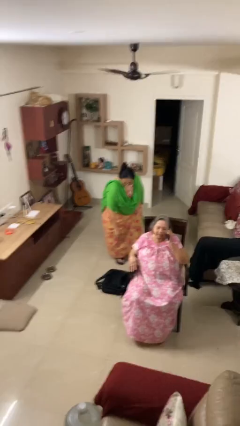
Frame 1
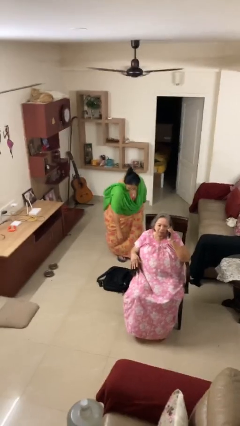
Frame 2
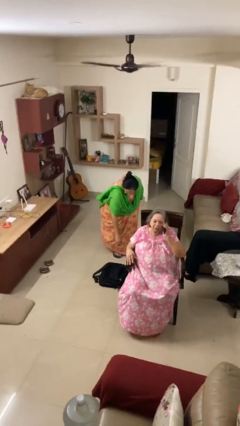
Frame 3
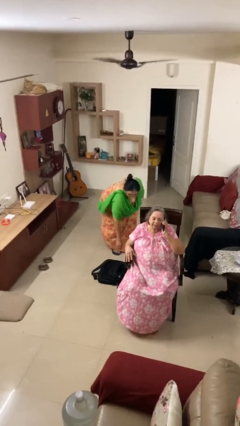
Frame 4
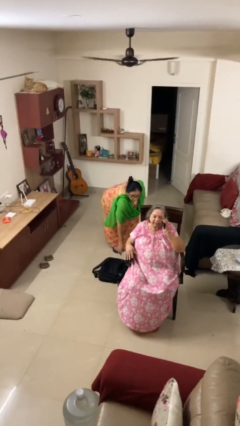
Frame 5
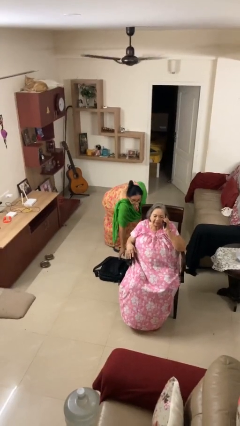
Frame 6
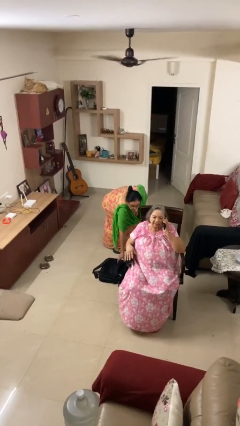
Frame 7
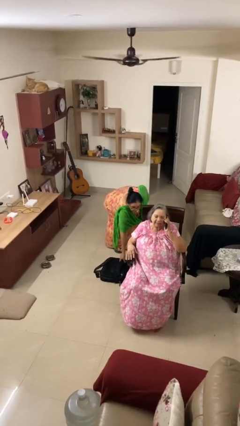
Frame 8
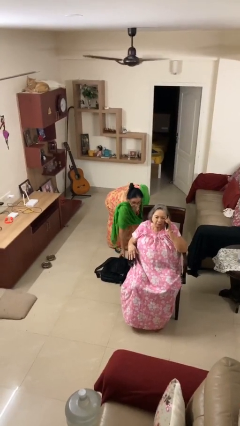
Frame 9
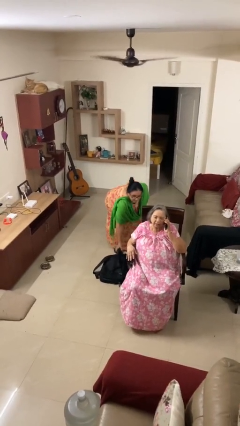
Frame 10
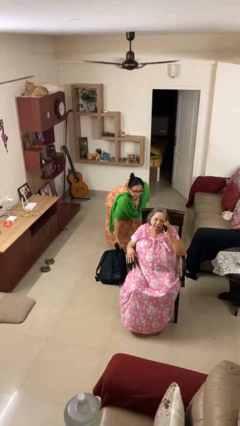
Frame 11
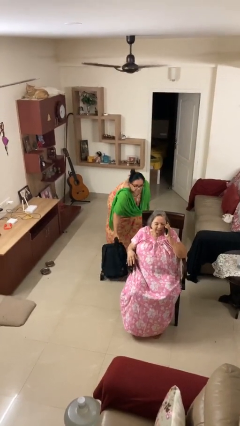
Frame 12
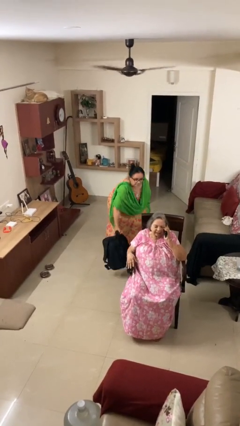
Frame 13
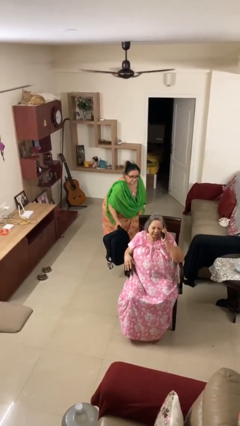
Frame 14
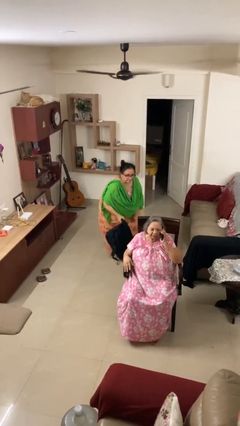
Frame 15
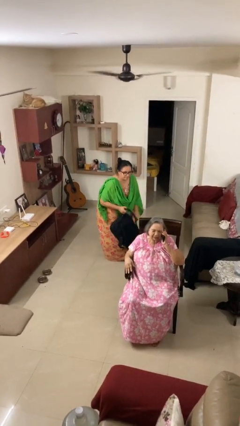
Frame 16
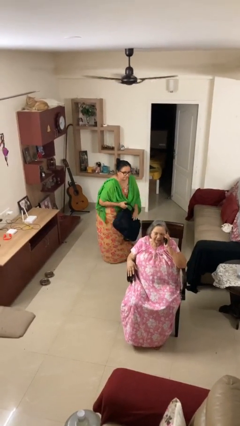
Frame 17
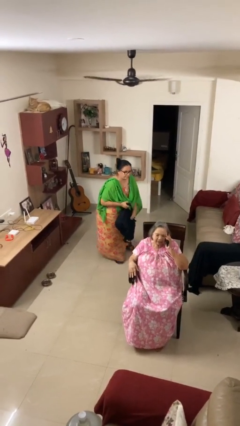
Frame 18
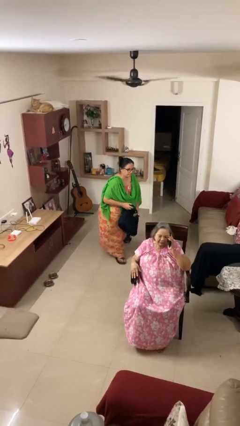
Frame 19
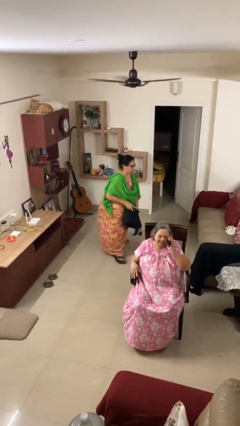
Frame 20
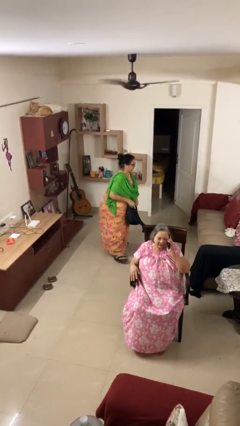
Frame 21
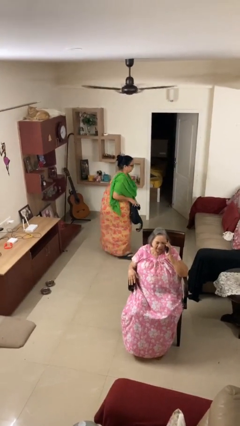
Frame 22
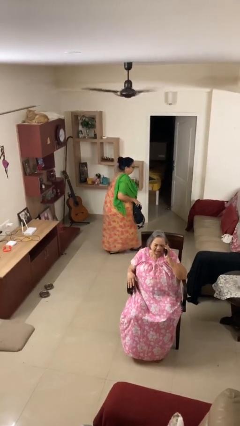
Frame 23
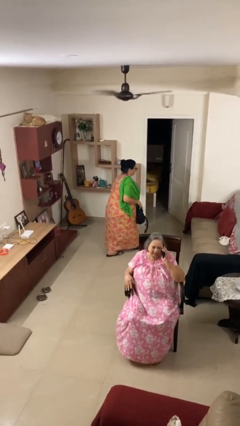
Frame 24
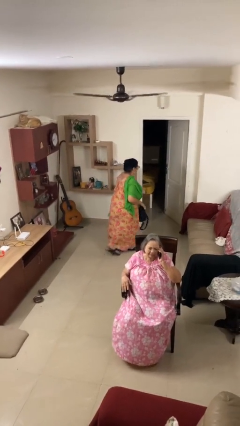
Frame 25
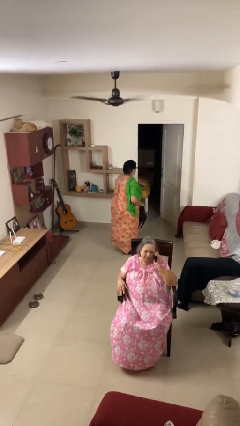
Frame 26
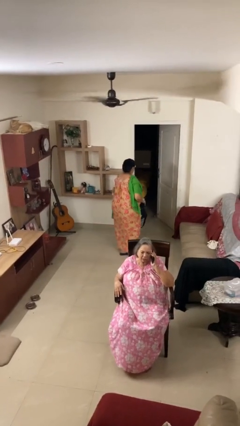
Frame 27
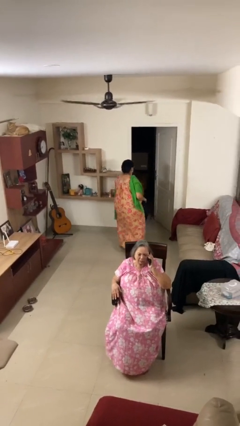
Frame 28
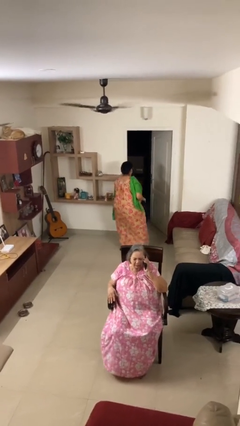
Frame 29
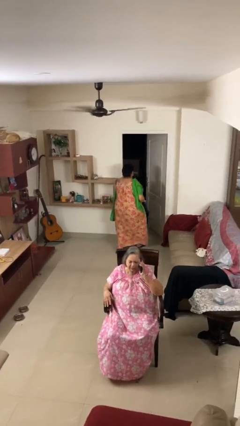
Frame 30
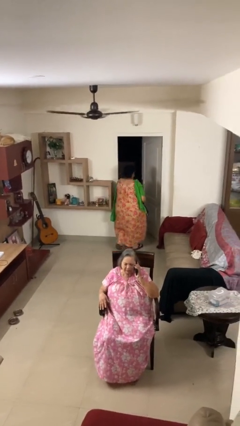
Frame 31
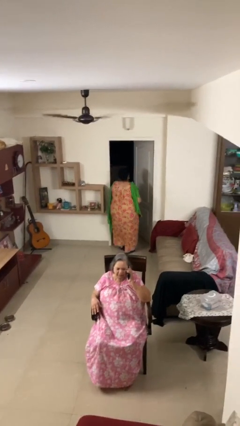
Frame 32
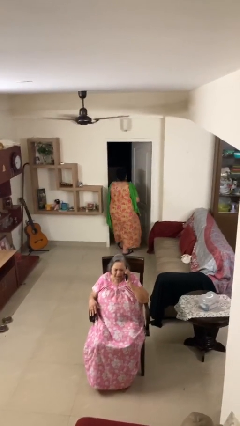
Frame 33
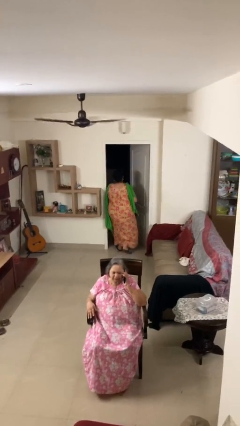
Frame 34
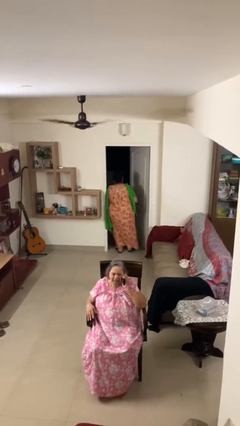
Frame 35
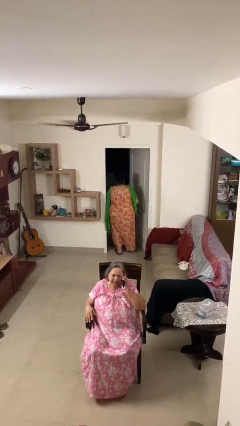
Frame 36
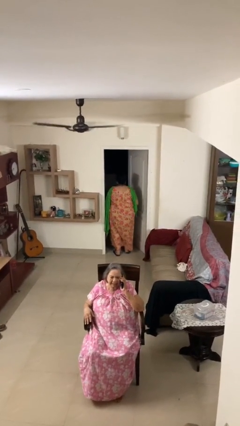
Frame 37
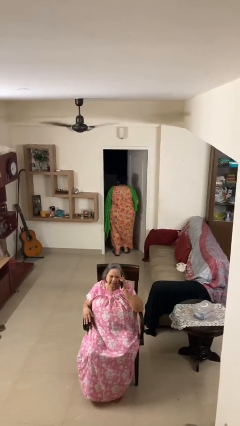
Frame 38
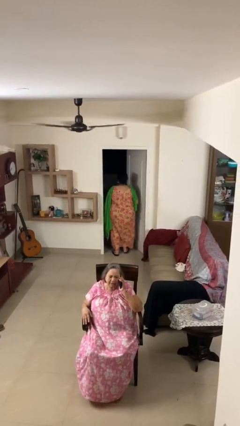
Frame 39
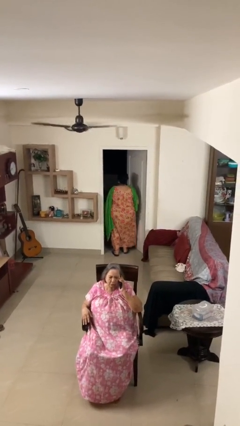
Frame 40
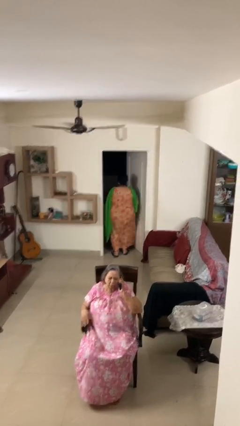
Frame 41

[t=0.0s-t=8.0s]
person steals object from person

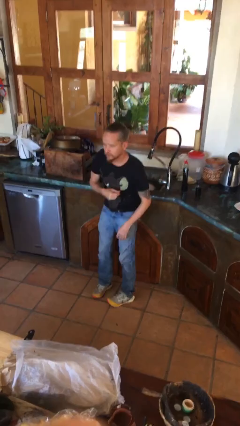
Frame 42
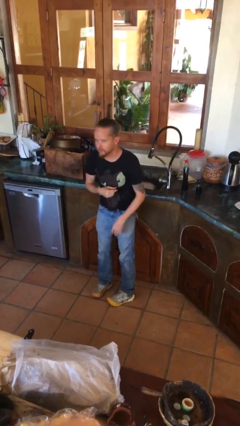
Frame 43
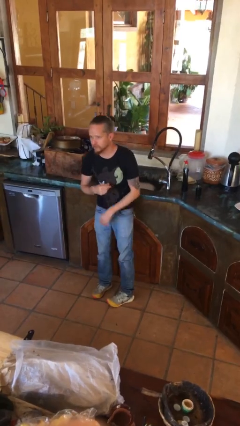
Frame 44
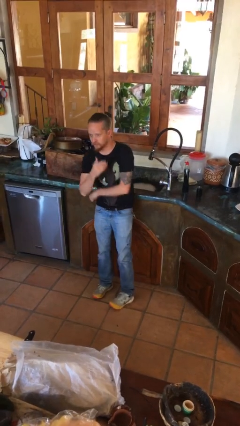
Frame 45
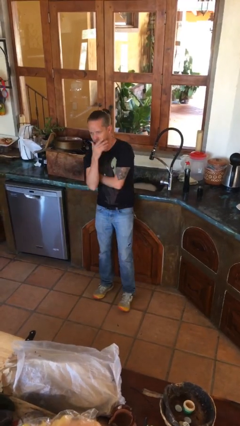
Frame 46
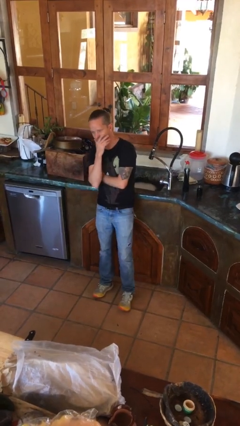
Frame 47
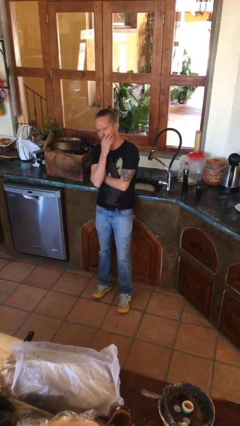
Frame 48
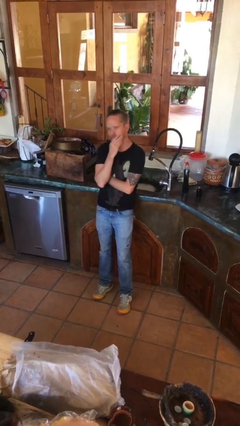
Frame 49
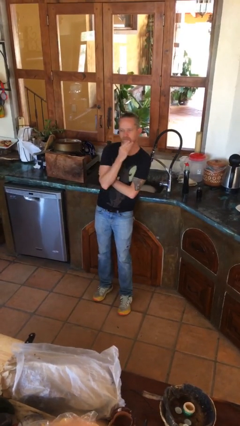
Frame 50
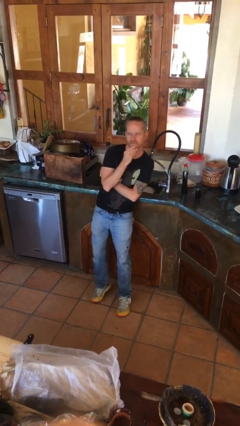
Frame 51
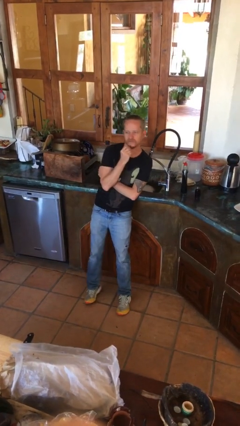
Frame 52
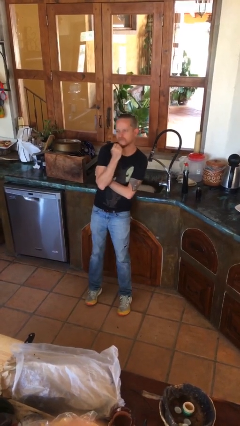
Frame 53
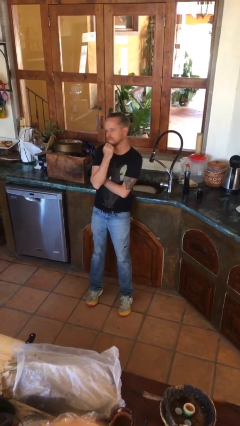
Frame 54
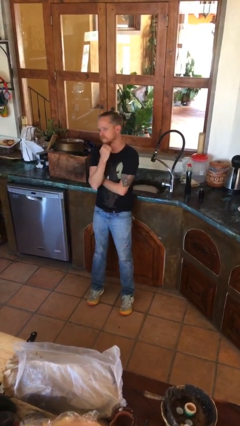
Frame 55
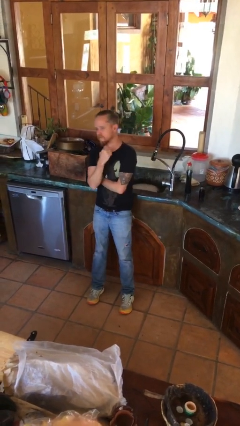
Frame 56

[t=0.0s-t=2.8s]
person strokes chin

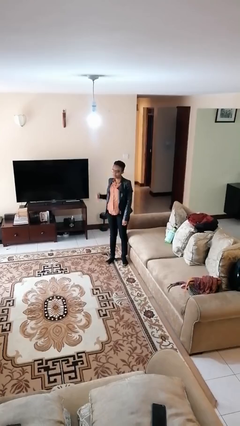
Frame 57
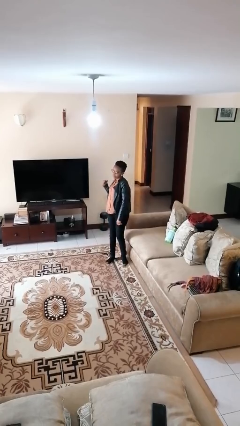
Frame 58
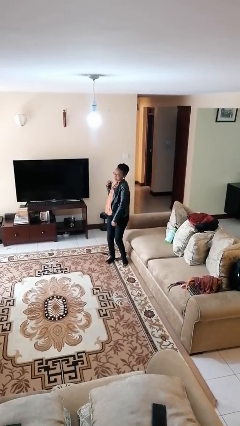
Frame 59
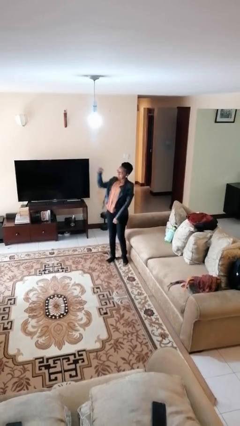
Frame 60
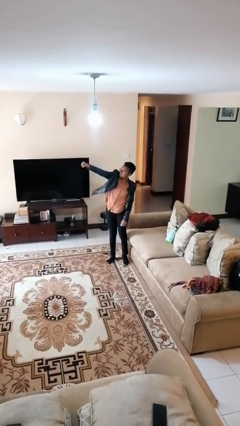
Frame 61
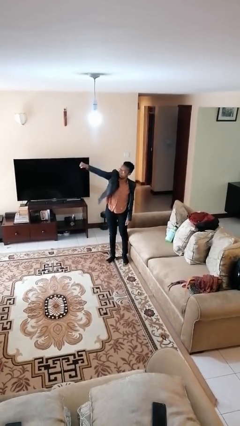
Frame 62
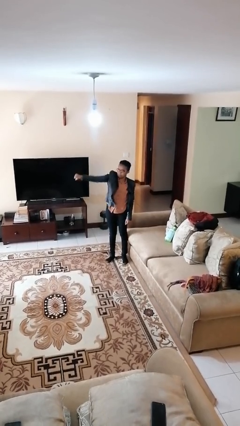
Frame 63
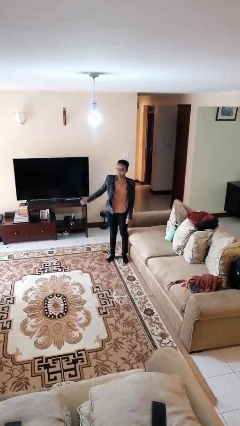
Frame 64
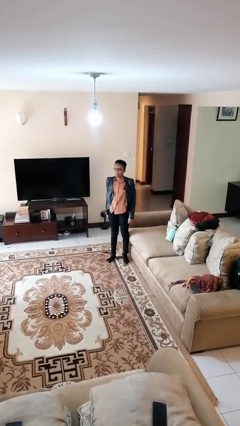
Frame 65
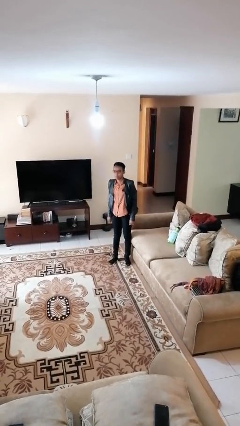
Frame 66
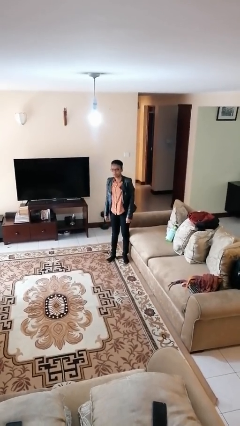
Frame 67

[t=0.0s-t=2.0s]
person punches

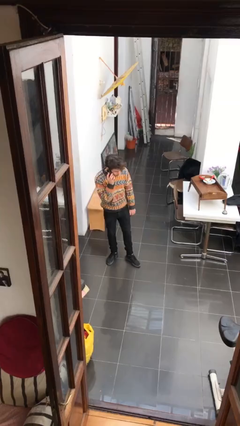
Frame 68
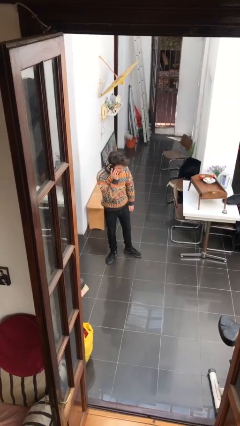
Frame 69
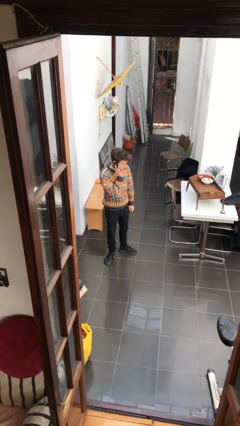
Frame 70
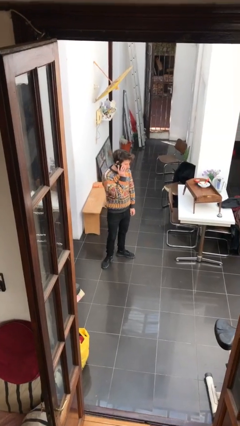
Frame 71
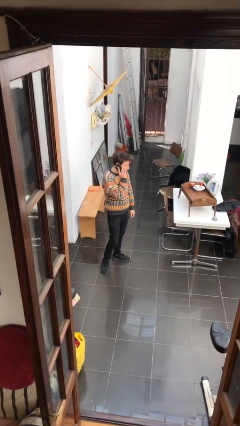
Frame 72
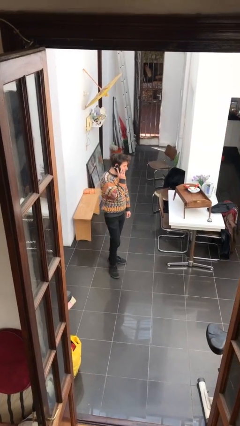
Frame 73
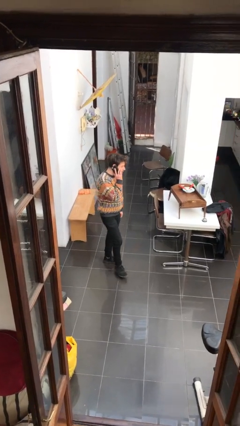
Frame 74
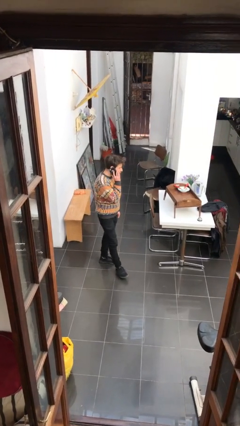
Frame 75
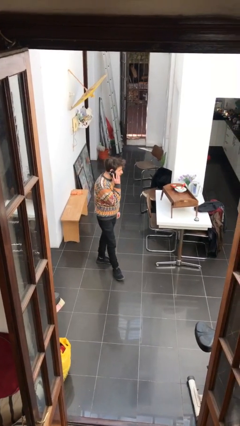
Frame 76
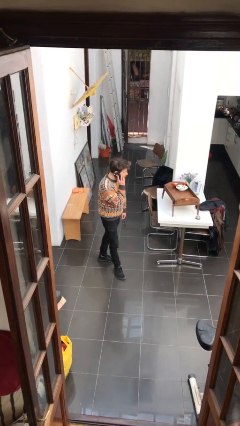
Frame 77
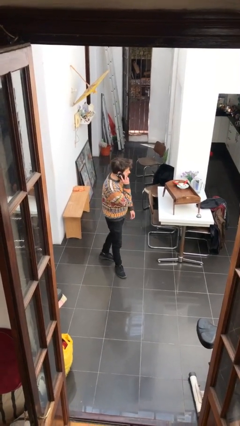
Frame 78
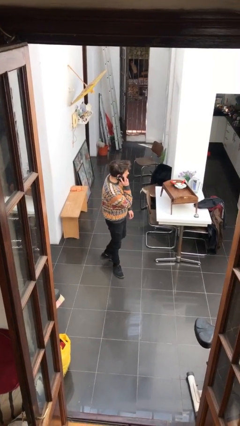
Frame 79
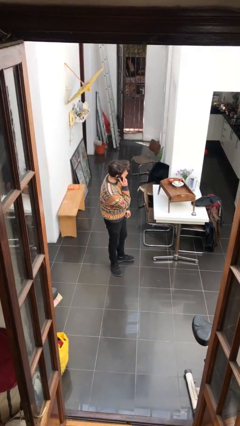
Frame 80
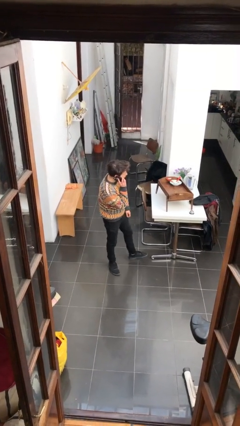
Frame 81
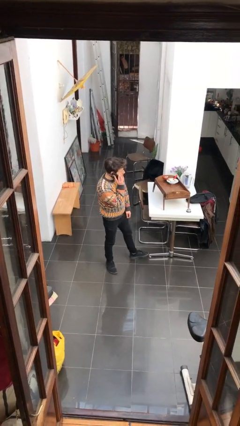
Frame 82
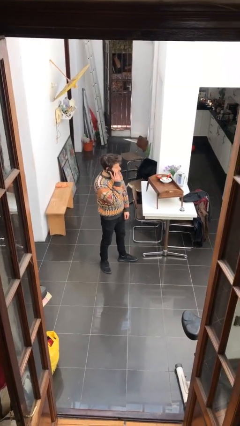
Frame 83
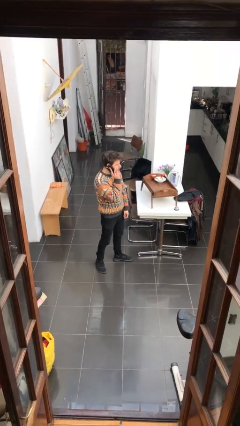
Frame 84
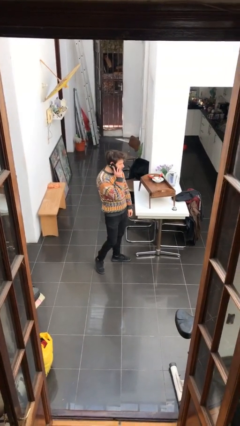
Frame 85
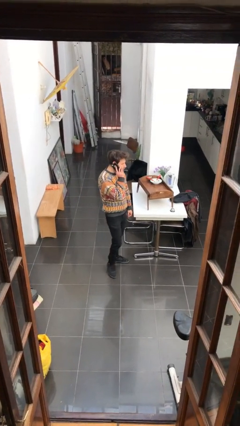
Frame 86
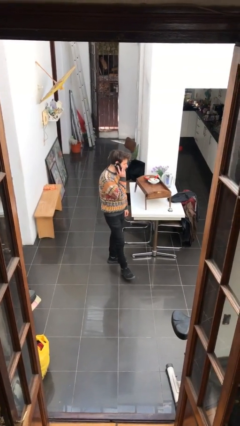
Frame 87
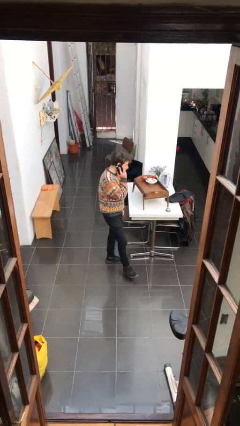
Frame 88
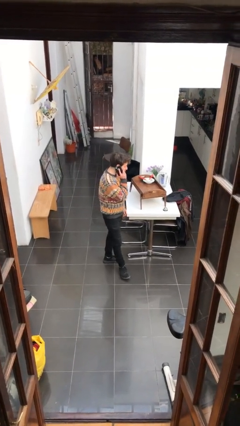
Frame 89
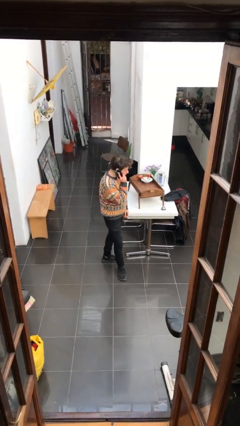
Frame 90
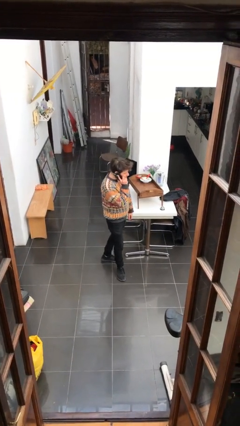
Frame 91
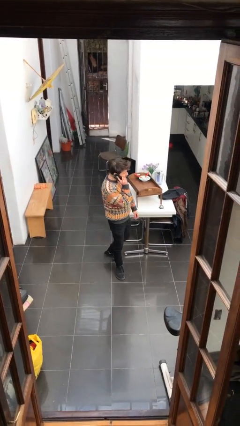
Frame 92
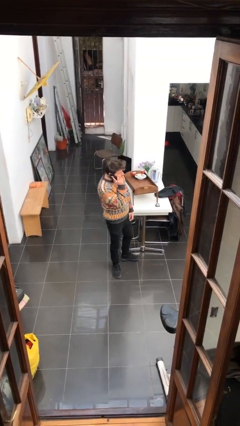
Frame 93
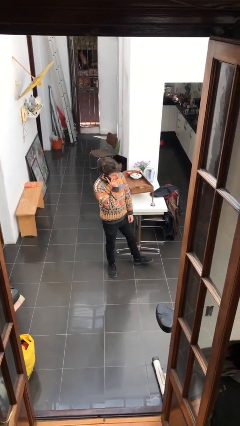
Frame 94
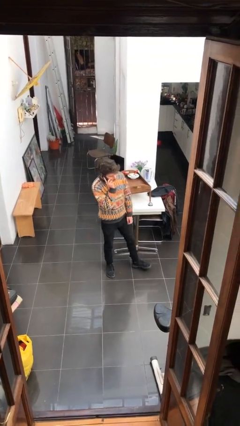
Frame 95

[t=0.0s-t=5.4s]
person talks on phone
